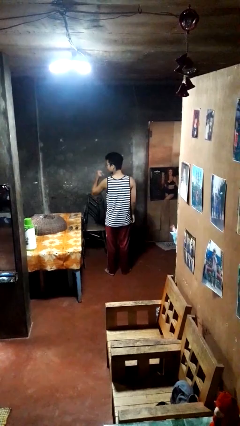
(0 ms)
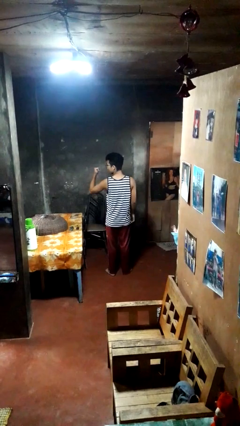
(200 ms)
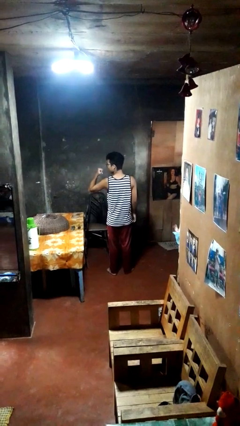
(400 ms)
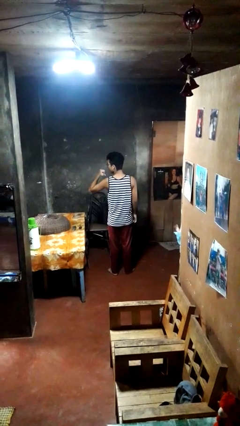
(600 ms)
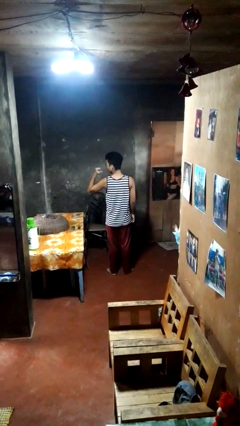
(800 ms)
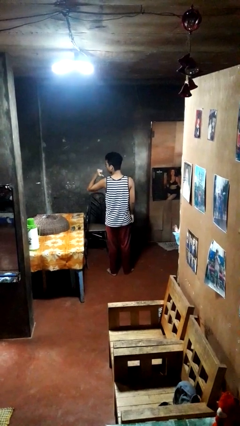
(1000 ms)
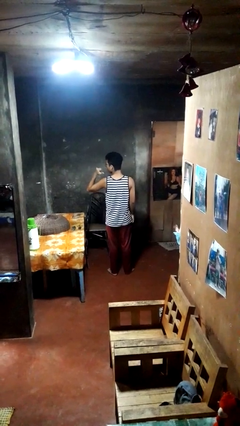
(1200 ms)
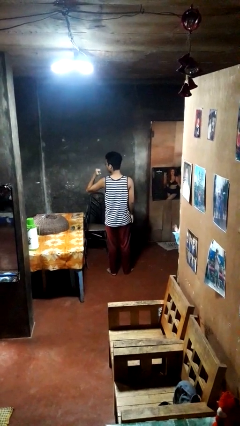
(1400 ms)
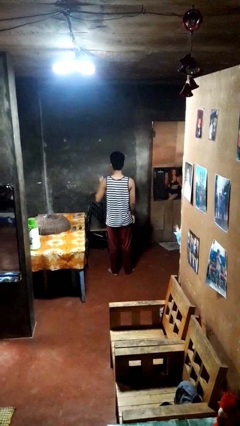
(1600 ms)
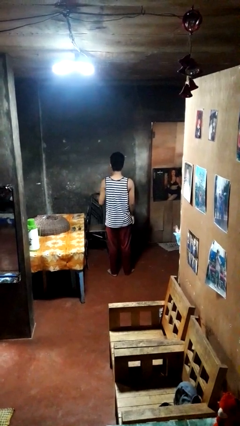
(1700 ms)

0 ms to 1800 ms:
person gestures behind me

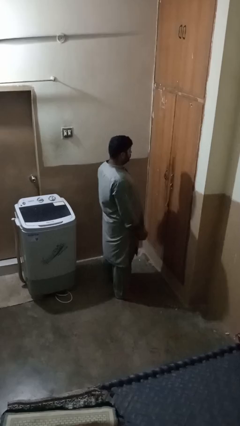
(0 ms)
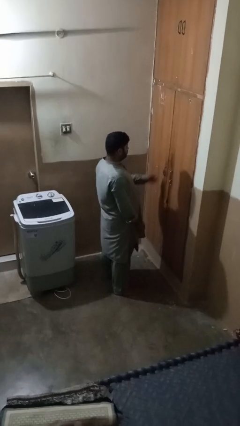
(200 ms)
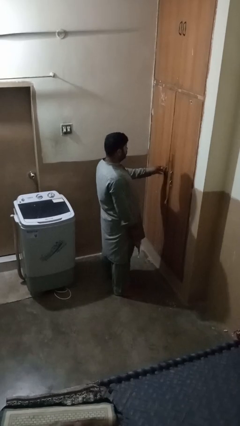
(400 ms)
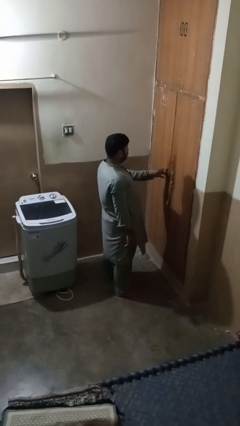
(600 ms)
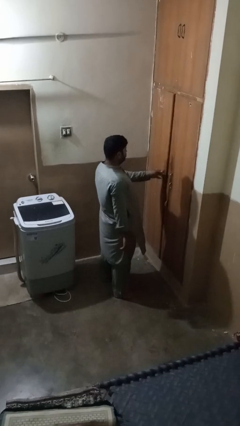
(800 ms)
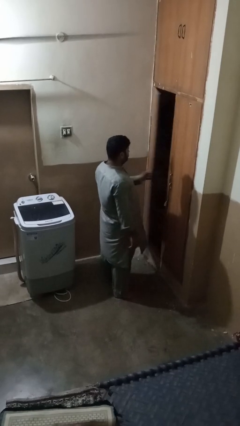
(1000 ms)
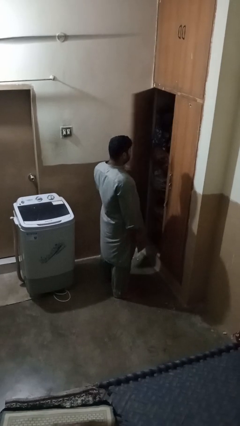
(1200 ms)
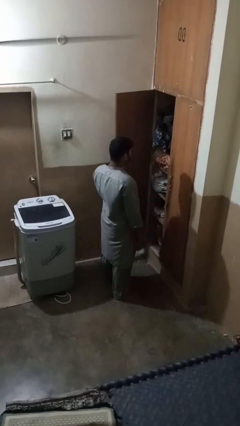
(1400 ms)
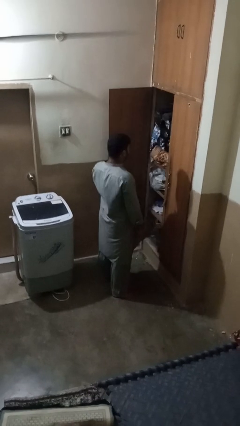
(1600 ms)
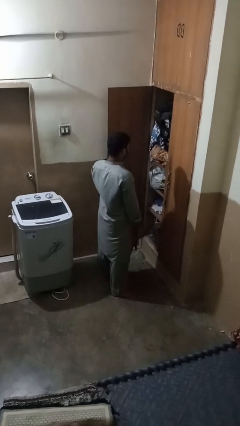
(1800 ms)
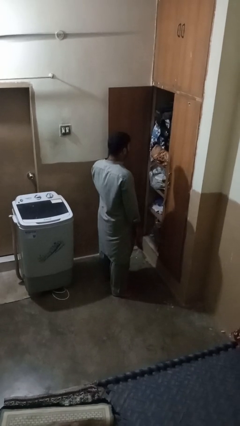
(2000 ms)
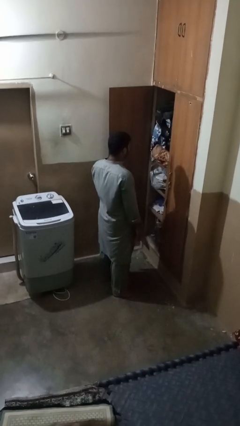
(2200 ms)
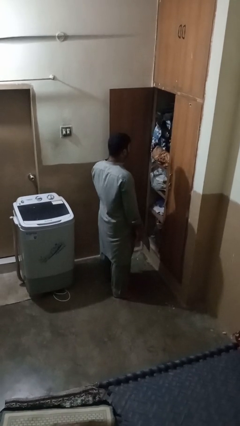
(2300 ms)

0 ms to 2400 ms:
person opens closet door

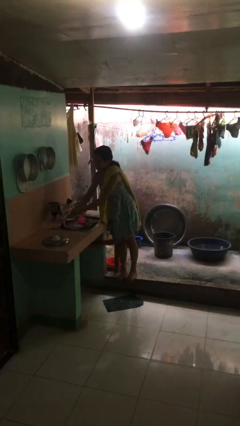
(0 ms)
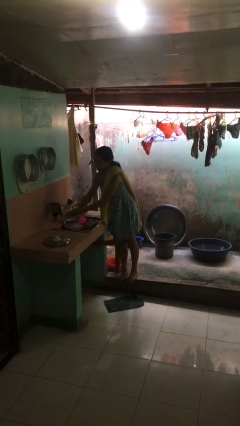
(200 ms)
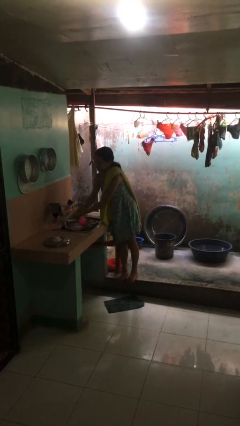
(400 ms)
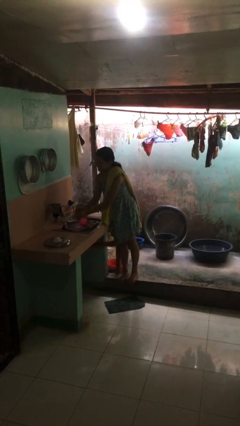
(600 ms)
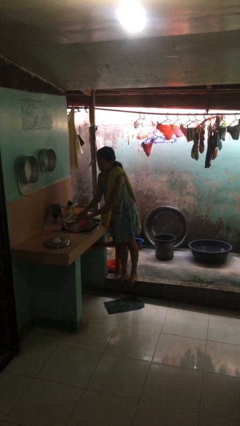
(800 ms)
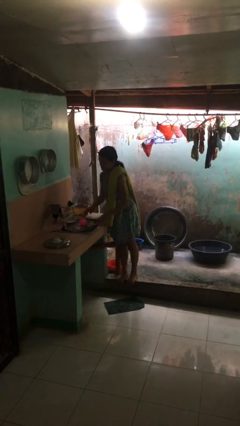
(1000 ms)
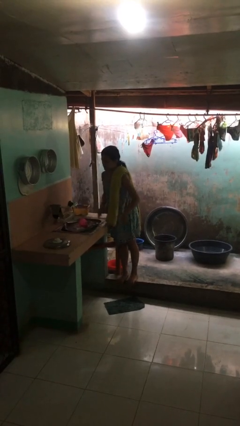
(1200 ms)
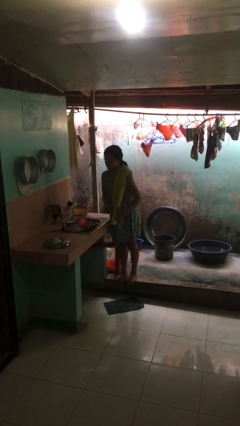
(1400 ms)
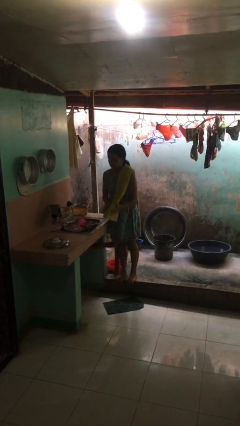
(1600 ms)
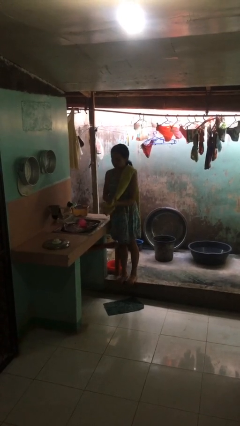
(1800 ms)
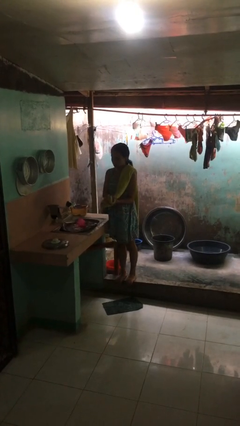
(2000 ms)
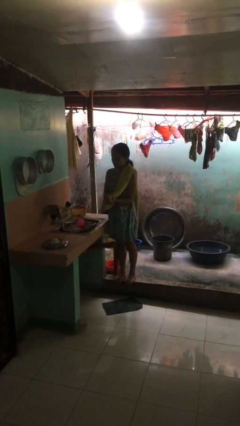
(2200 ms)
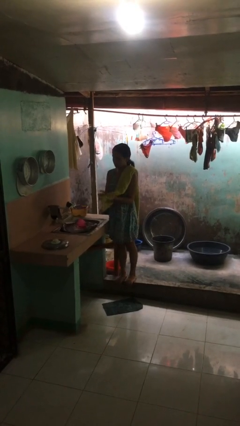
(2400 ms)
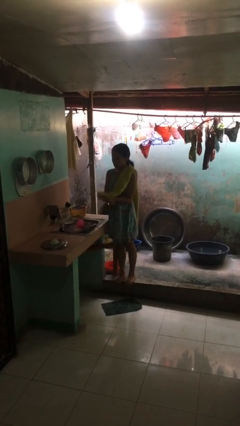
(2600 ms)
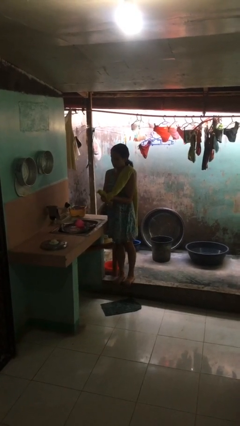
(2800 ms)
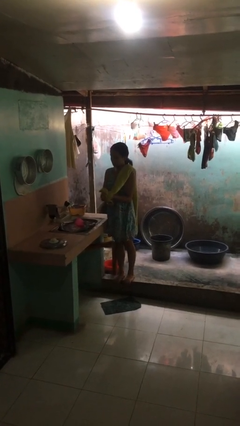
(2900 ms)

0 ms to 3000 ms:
person dries hands with towel

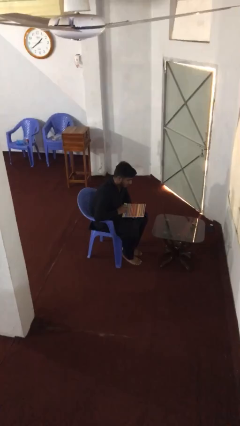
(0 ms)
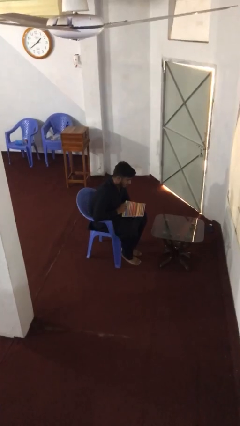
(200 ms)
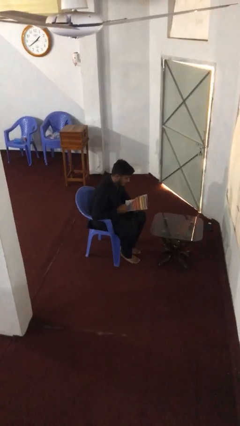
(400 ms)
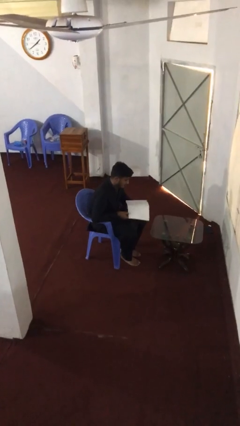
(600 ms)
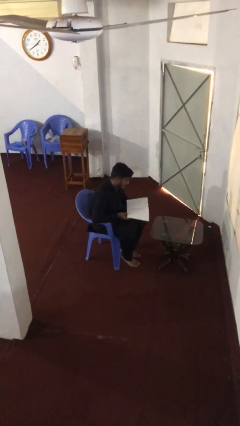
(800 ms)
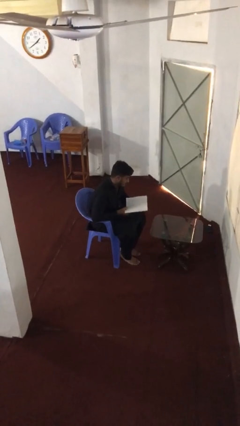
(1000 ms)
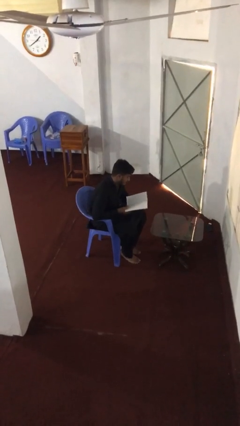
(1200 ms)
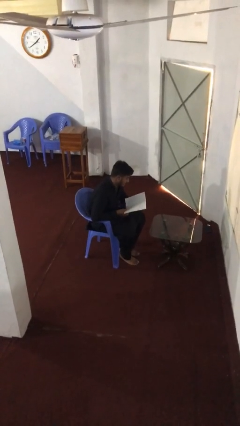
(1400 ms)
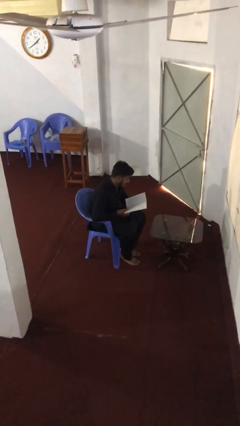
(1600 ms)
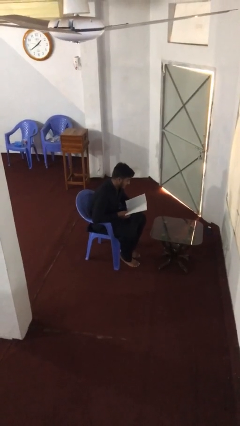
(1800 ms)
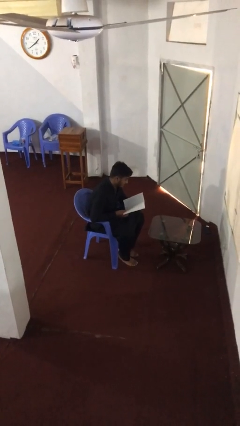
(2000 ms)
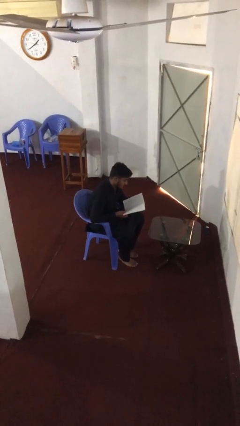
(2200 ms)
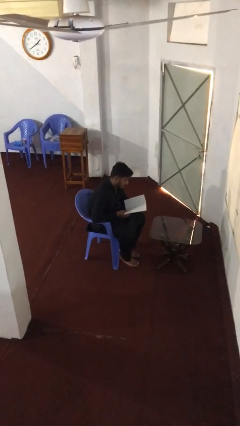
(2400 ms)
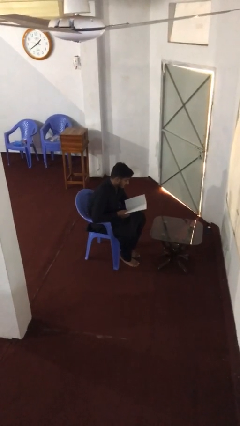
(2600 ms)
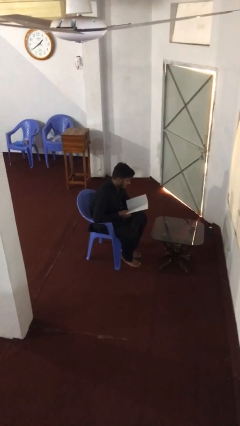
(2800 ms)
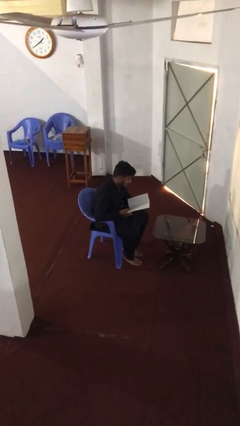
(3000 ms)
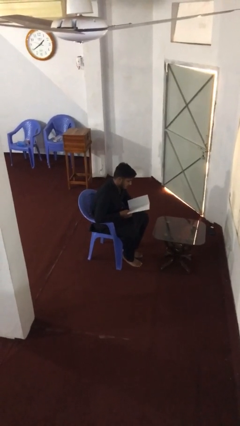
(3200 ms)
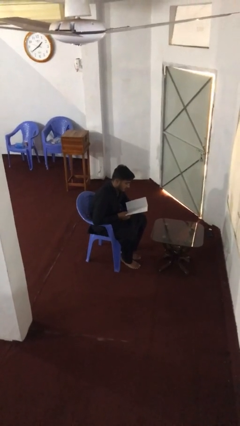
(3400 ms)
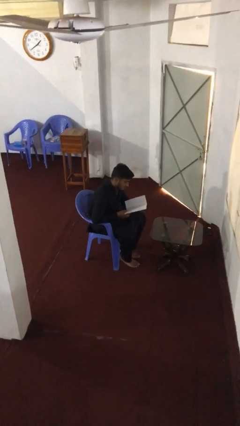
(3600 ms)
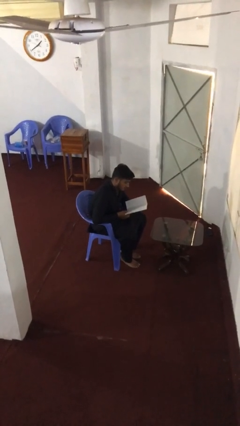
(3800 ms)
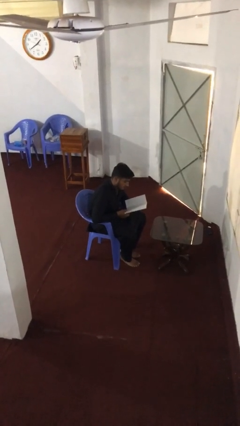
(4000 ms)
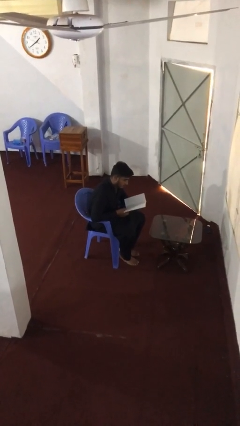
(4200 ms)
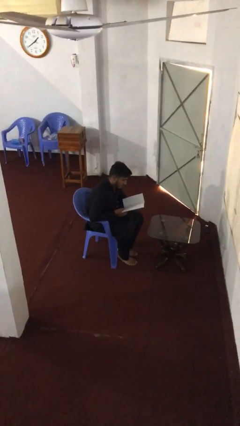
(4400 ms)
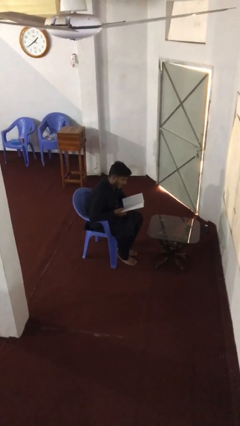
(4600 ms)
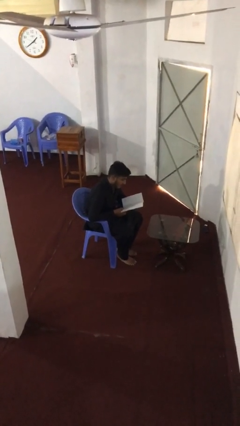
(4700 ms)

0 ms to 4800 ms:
person reads document

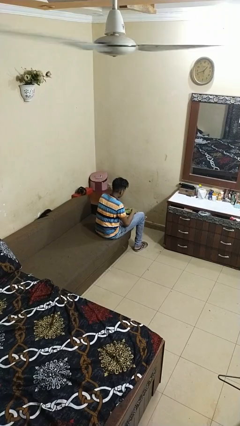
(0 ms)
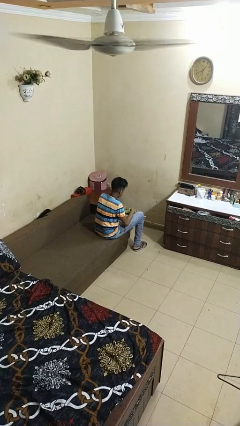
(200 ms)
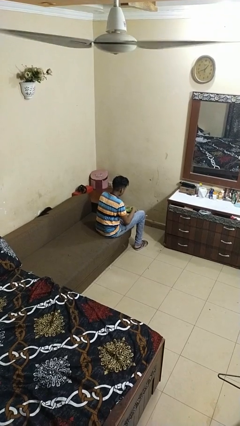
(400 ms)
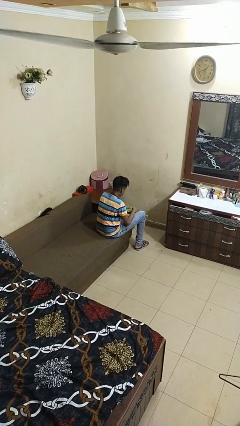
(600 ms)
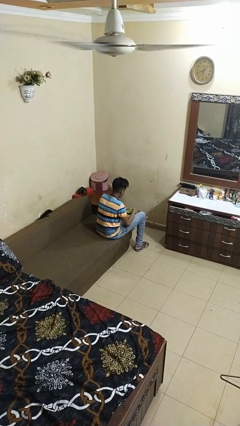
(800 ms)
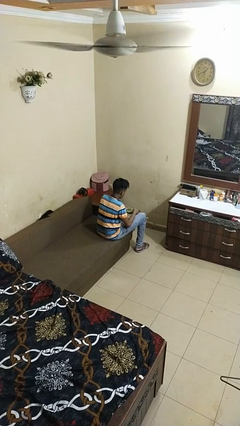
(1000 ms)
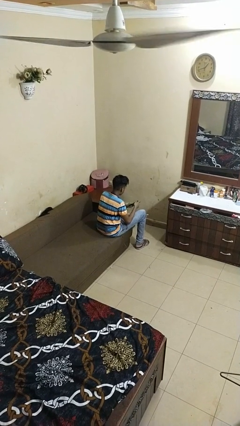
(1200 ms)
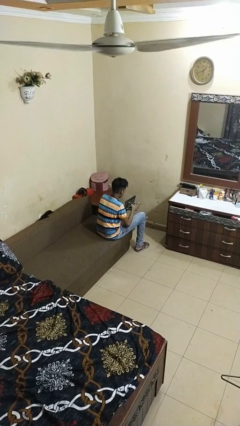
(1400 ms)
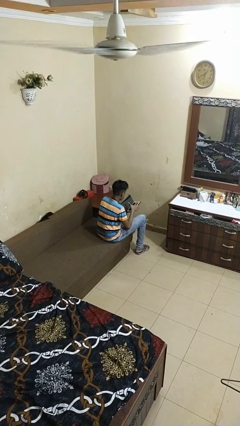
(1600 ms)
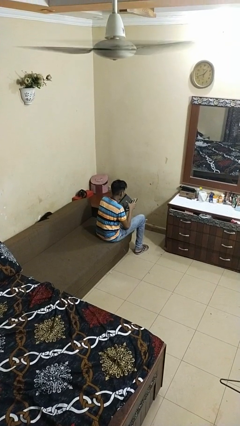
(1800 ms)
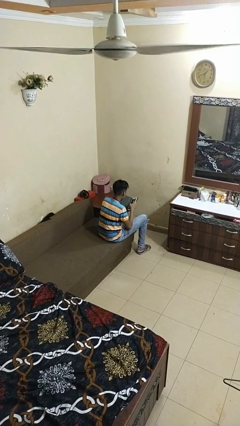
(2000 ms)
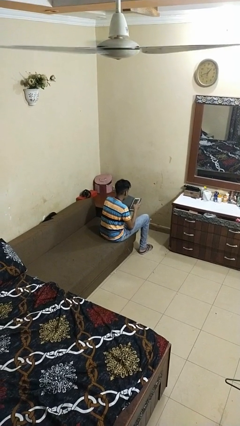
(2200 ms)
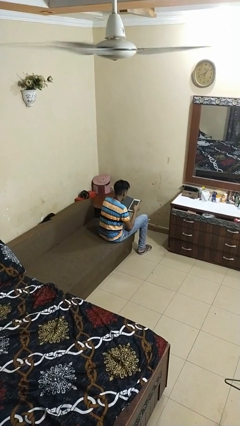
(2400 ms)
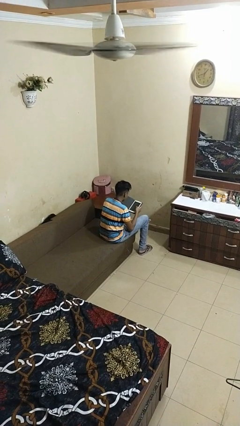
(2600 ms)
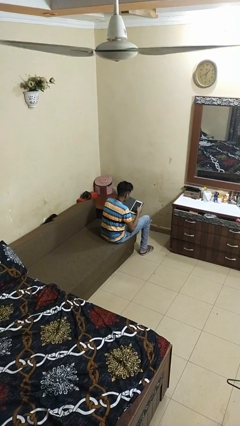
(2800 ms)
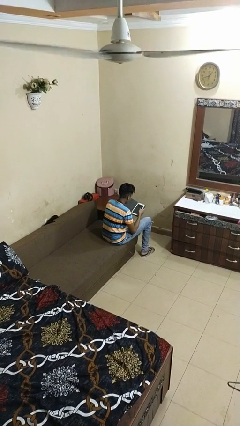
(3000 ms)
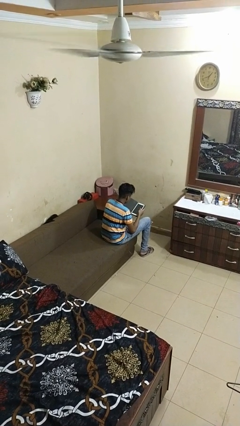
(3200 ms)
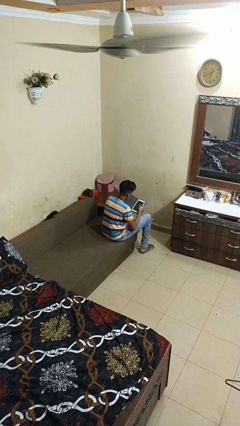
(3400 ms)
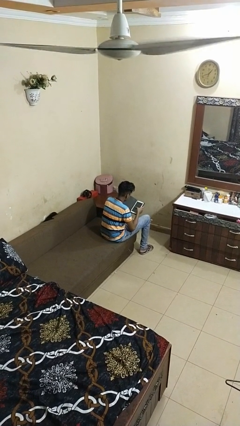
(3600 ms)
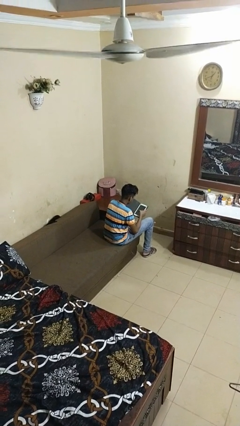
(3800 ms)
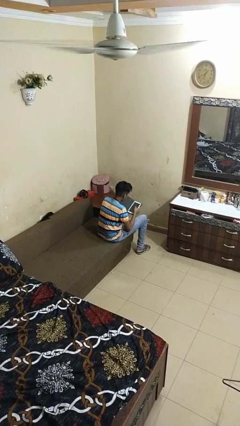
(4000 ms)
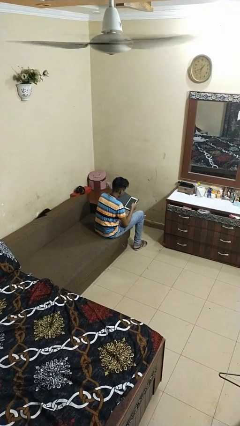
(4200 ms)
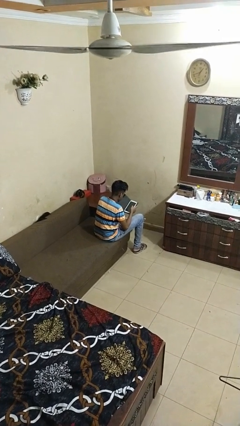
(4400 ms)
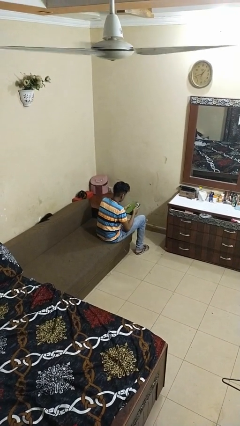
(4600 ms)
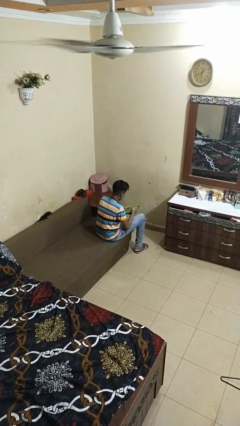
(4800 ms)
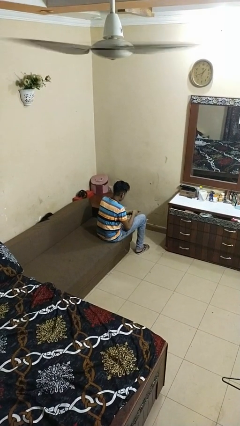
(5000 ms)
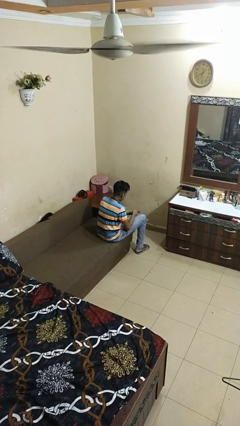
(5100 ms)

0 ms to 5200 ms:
person interacts with tablet

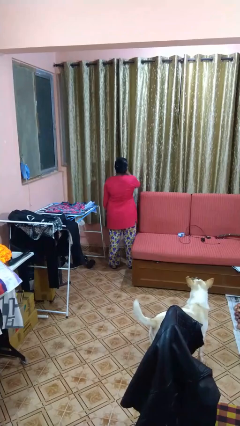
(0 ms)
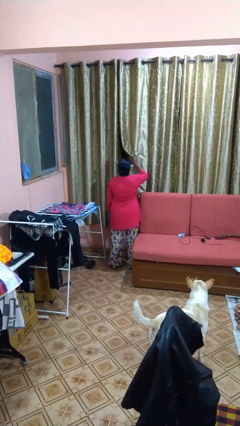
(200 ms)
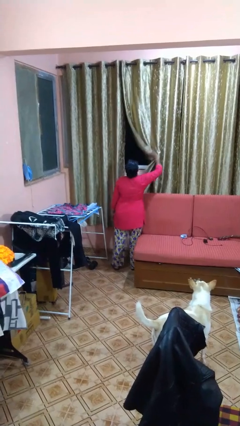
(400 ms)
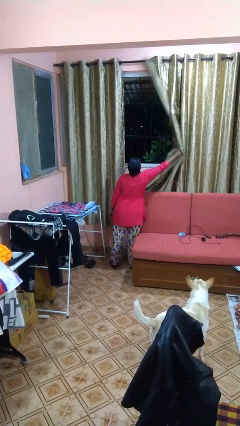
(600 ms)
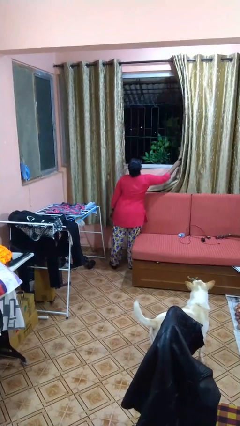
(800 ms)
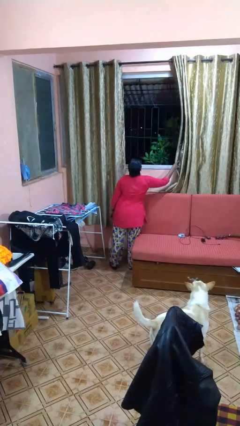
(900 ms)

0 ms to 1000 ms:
person opens curtains
